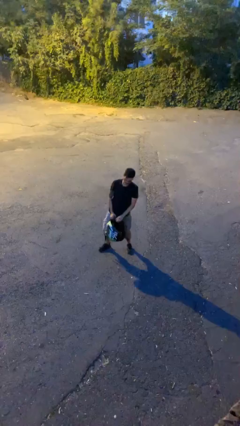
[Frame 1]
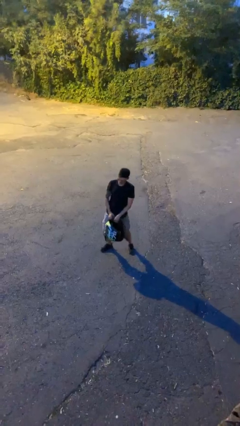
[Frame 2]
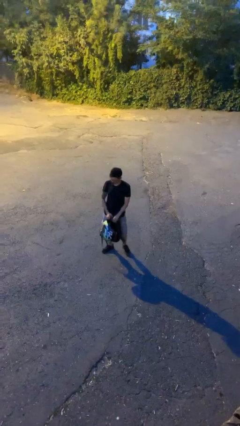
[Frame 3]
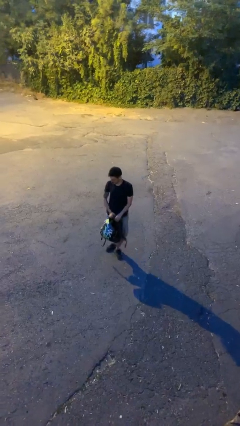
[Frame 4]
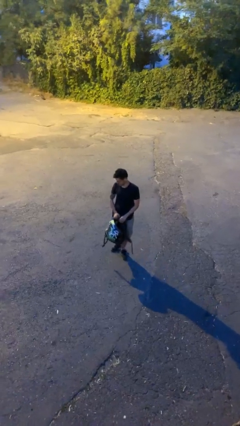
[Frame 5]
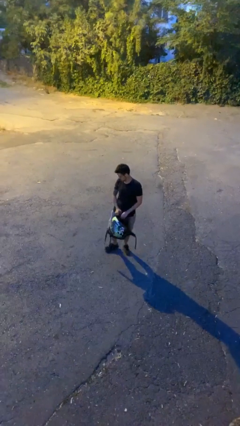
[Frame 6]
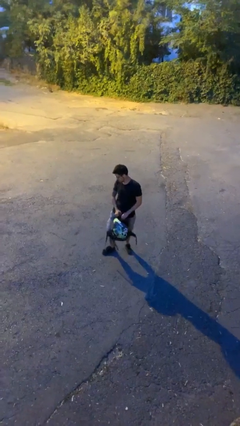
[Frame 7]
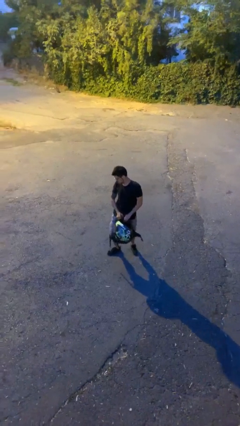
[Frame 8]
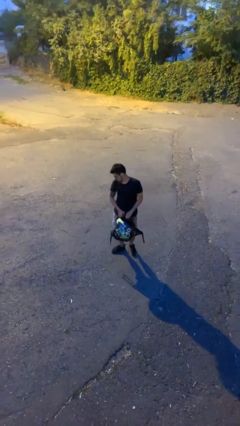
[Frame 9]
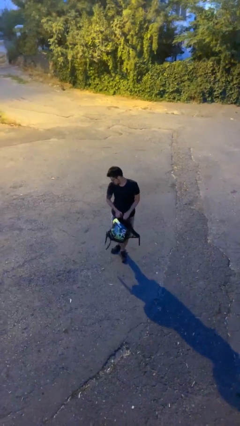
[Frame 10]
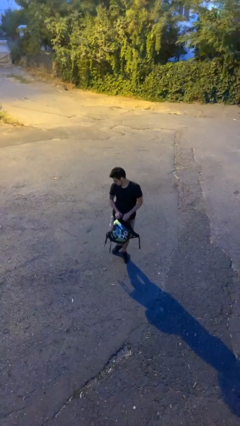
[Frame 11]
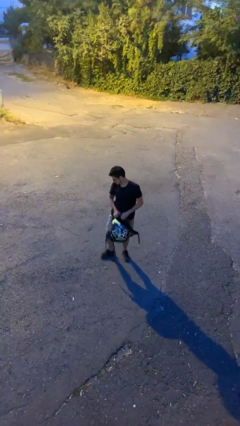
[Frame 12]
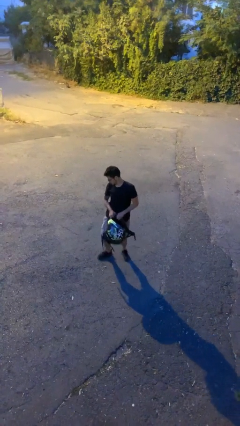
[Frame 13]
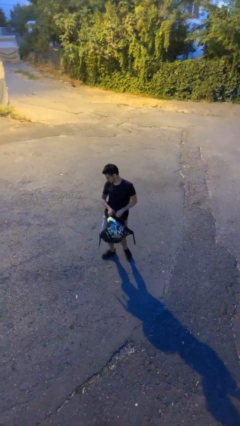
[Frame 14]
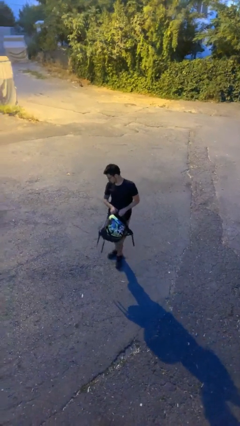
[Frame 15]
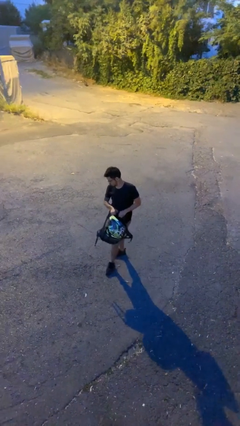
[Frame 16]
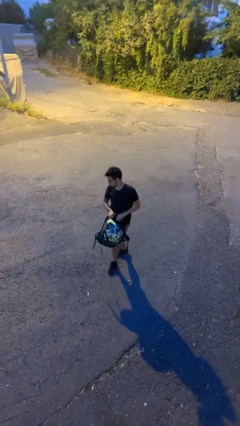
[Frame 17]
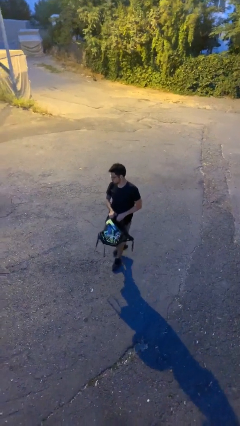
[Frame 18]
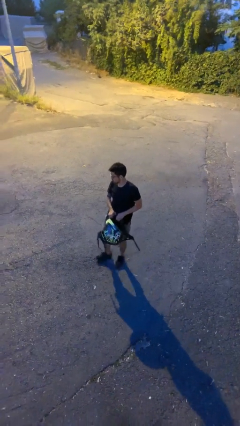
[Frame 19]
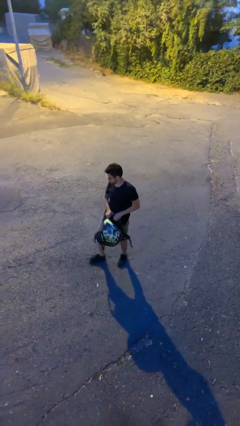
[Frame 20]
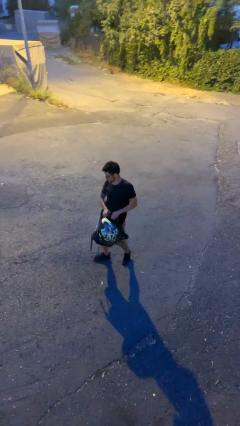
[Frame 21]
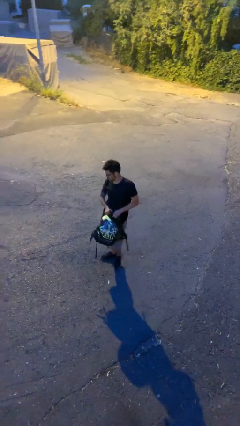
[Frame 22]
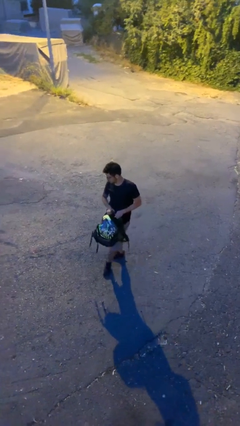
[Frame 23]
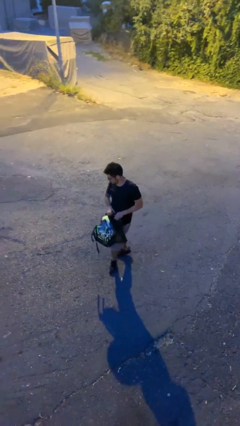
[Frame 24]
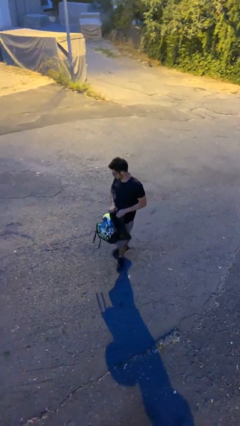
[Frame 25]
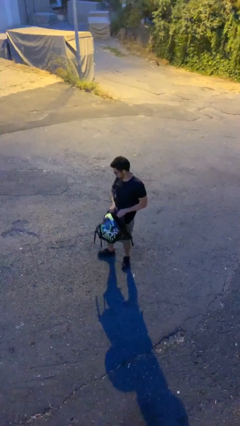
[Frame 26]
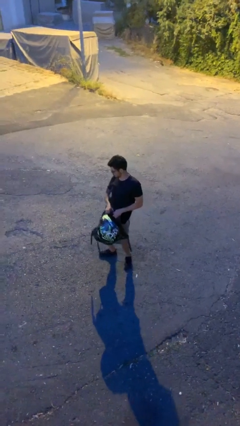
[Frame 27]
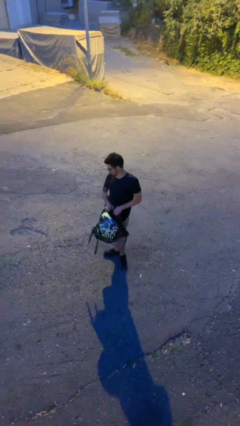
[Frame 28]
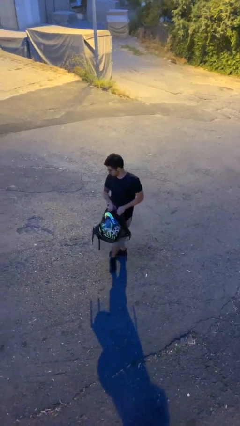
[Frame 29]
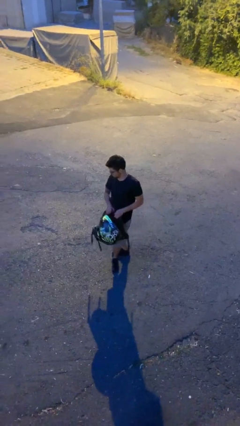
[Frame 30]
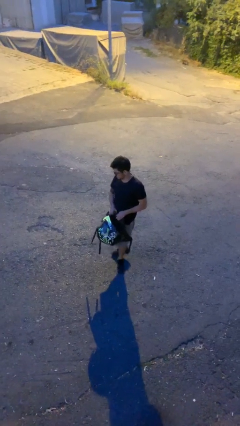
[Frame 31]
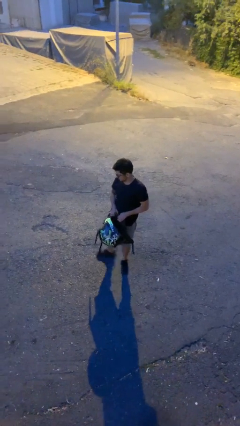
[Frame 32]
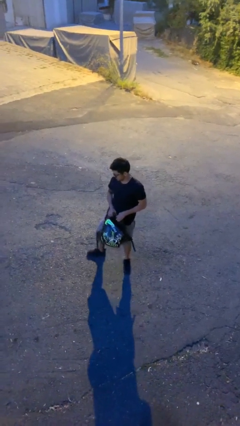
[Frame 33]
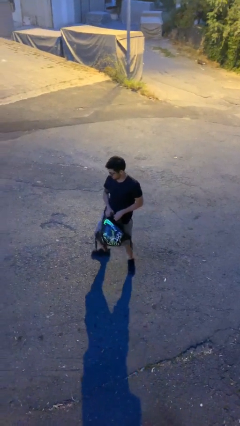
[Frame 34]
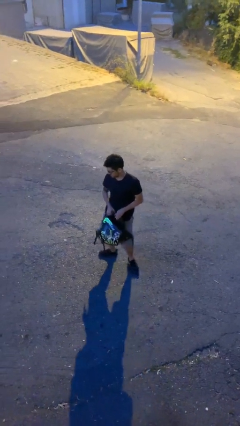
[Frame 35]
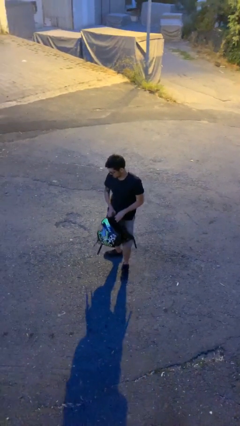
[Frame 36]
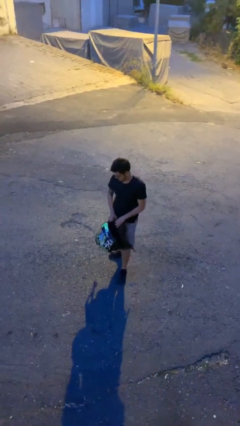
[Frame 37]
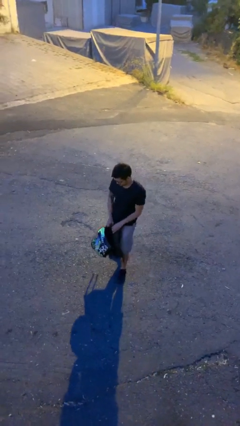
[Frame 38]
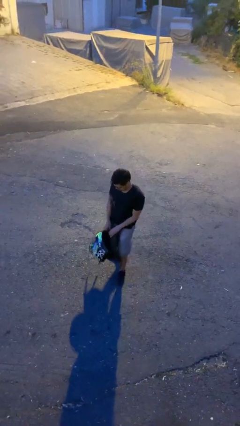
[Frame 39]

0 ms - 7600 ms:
person carries heavy object

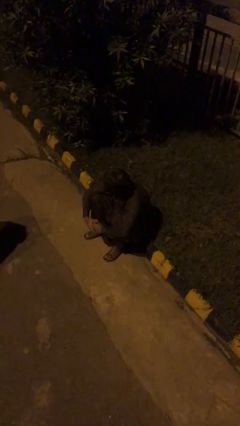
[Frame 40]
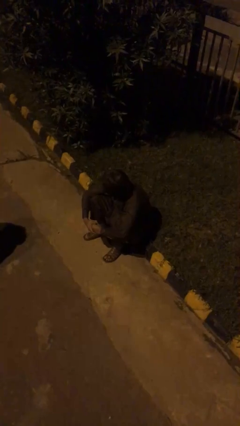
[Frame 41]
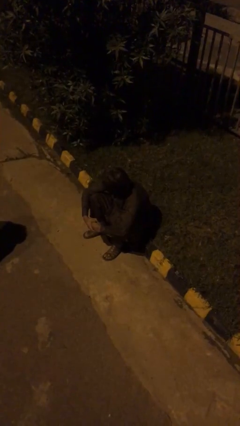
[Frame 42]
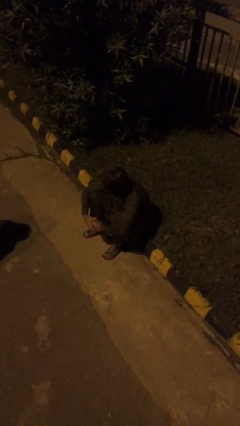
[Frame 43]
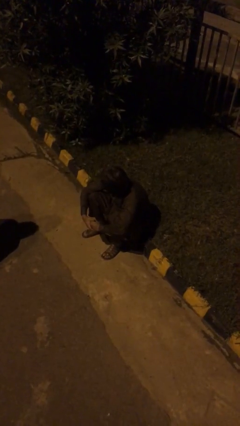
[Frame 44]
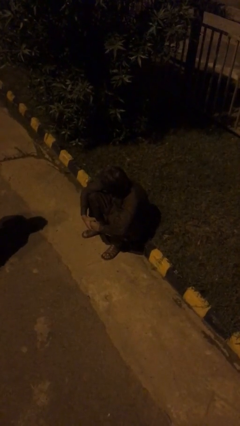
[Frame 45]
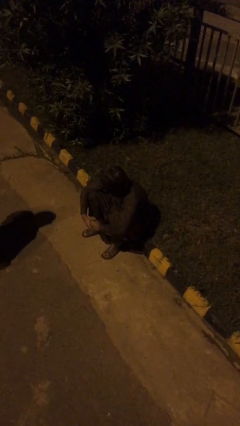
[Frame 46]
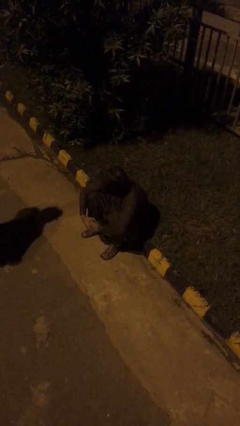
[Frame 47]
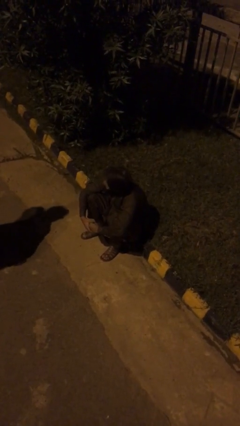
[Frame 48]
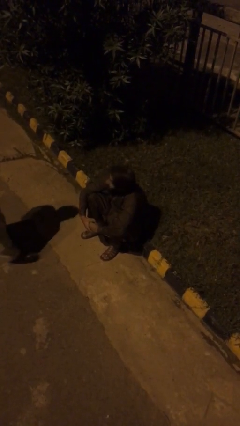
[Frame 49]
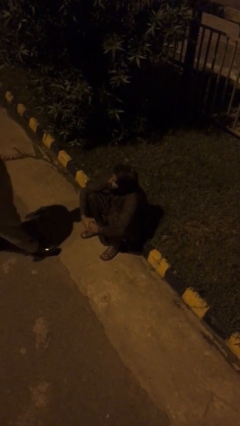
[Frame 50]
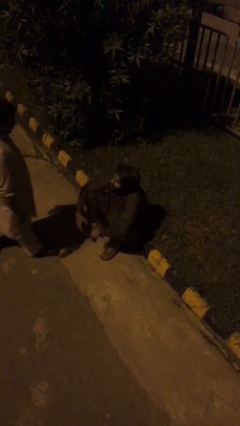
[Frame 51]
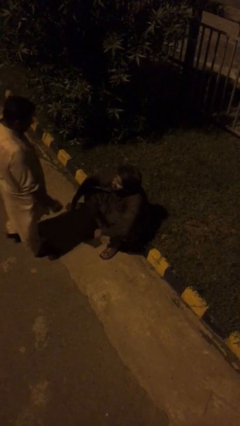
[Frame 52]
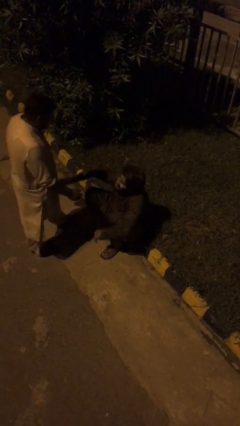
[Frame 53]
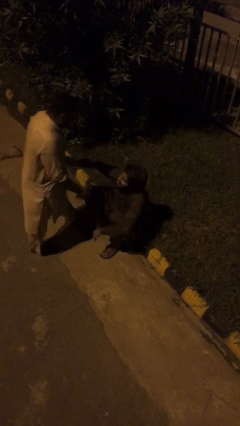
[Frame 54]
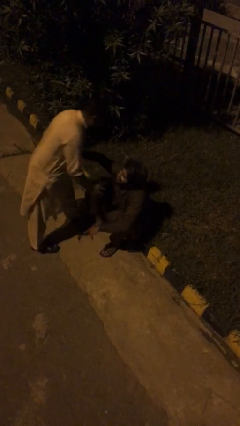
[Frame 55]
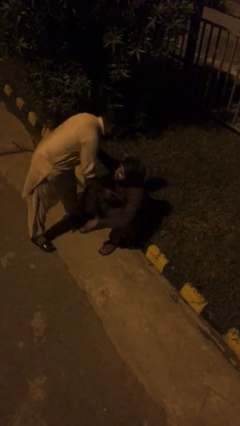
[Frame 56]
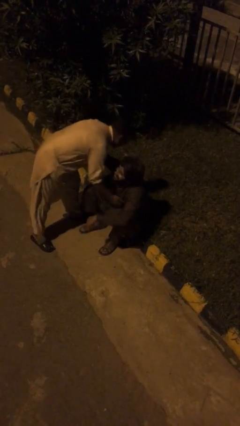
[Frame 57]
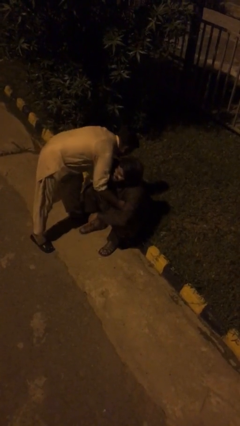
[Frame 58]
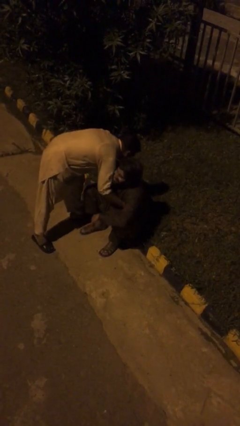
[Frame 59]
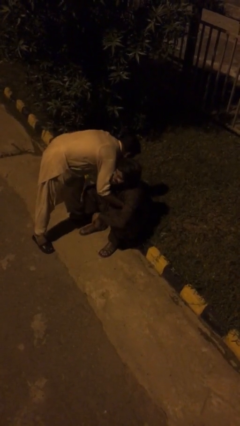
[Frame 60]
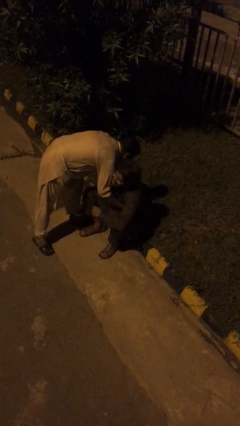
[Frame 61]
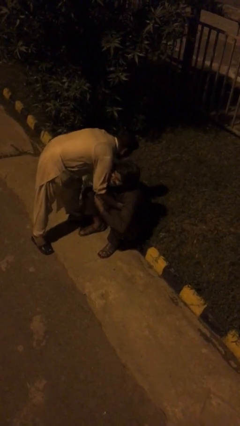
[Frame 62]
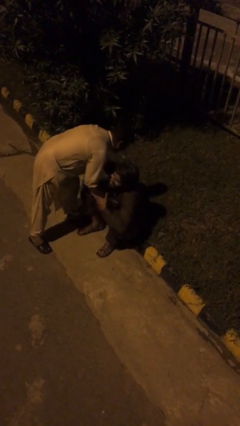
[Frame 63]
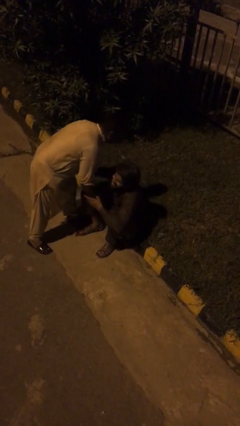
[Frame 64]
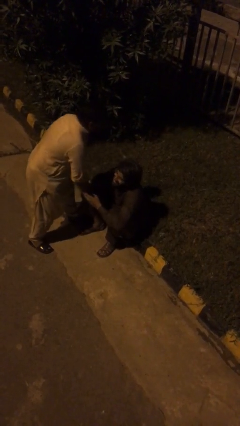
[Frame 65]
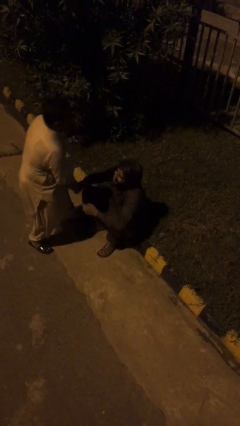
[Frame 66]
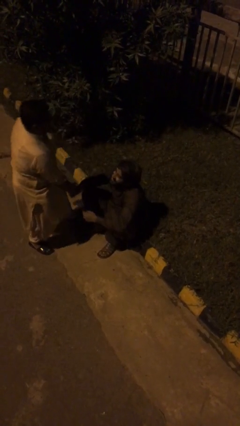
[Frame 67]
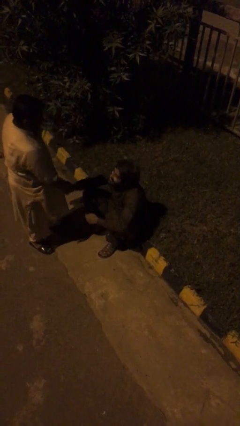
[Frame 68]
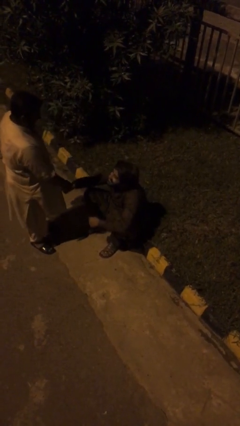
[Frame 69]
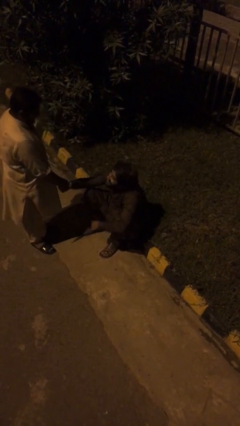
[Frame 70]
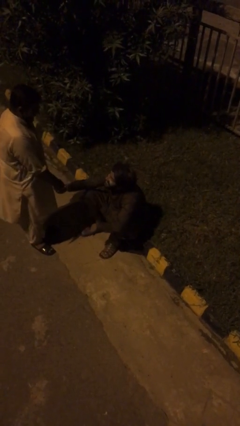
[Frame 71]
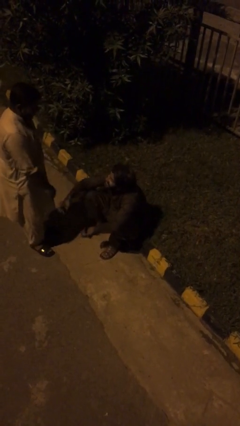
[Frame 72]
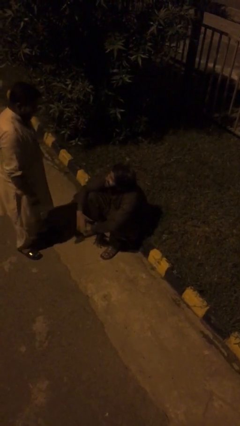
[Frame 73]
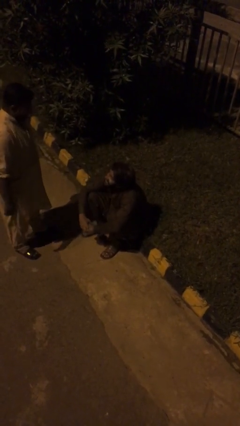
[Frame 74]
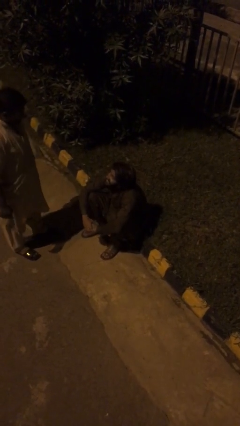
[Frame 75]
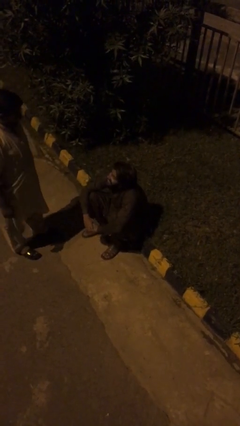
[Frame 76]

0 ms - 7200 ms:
person embraces person

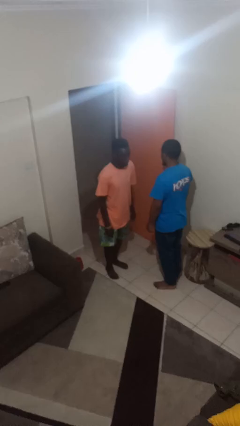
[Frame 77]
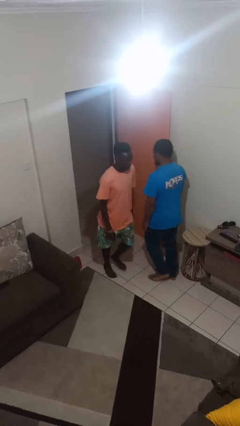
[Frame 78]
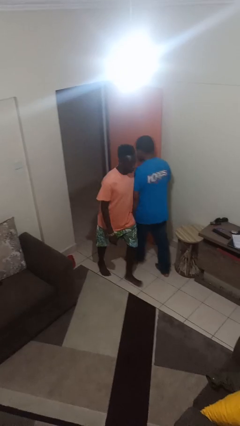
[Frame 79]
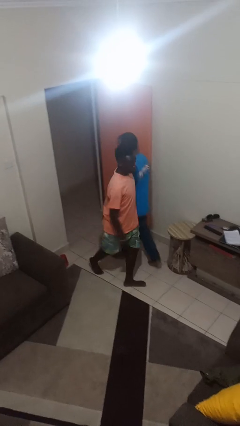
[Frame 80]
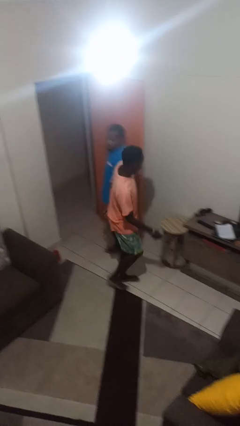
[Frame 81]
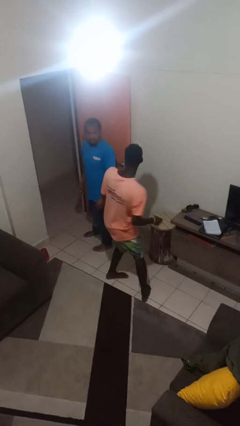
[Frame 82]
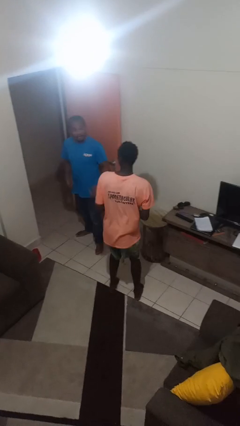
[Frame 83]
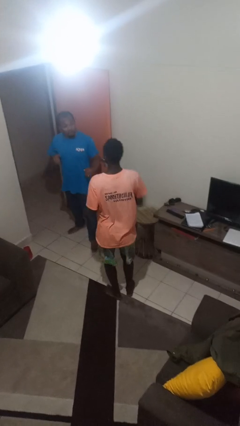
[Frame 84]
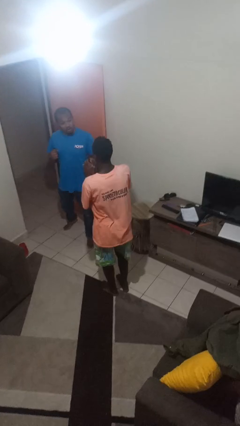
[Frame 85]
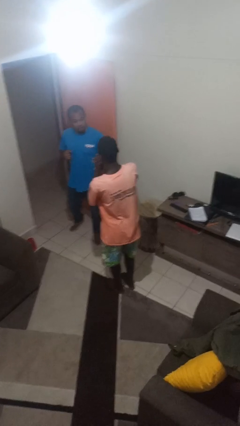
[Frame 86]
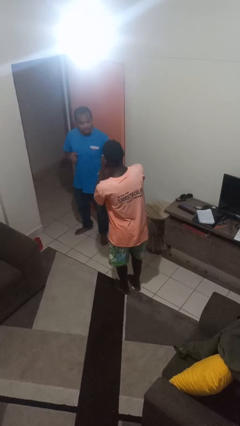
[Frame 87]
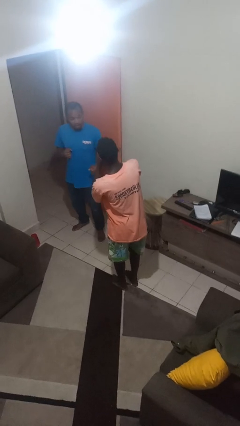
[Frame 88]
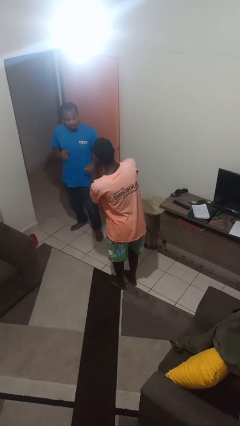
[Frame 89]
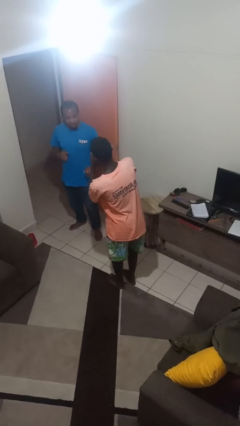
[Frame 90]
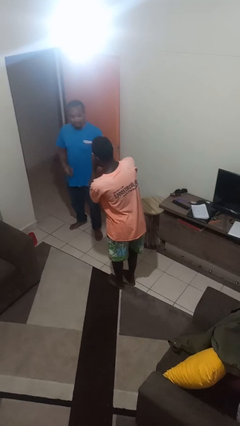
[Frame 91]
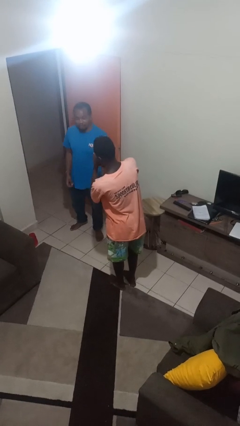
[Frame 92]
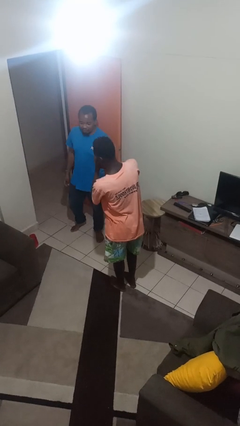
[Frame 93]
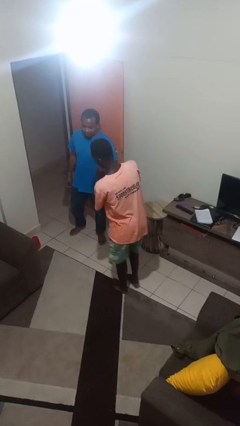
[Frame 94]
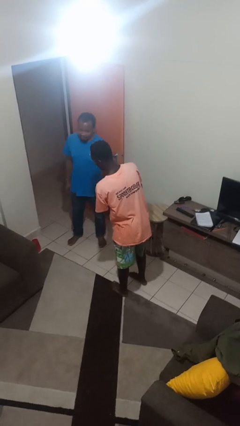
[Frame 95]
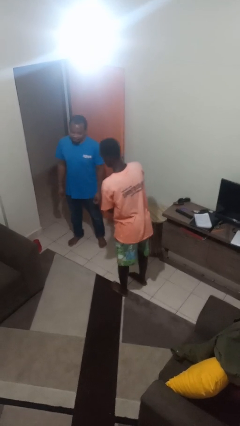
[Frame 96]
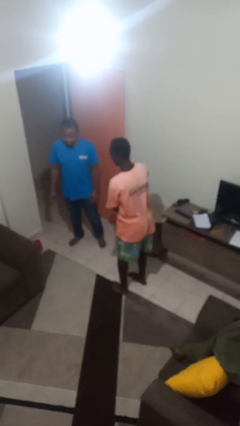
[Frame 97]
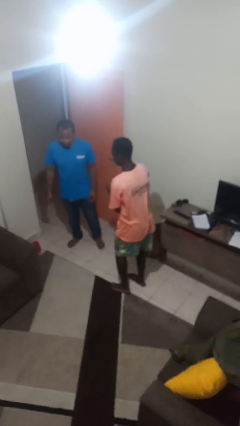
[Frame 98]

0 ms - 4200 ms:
person bumps into person
